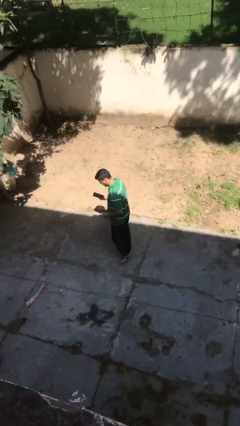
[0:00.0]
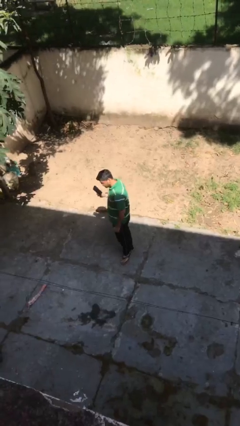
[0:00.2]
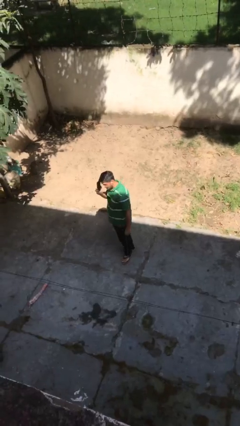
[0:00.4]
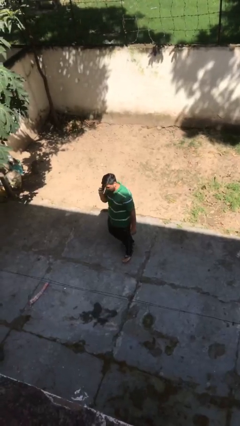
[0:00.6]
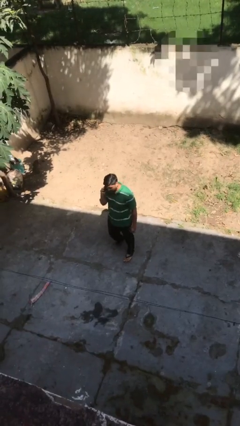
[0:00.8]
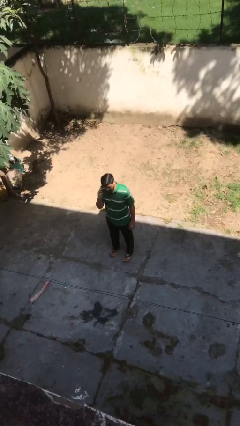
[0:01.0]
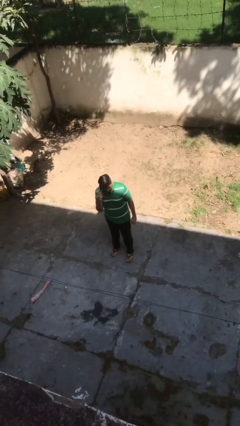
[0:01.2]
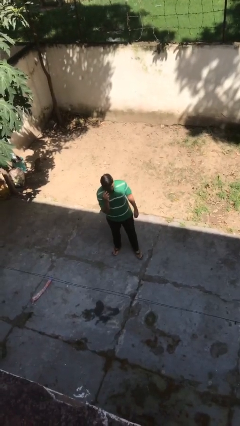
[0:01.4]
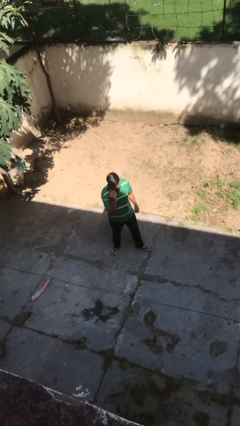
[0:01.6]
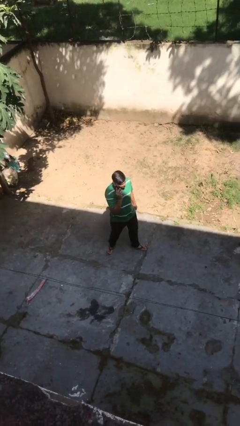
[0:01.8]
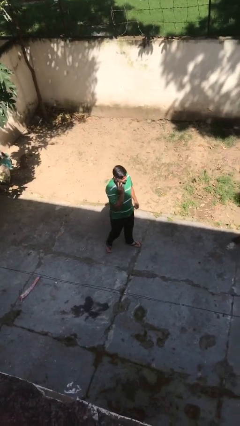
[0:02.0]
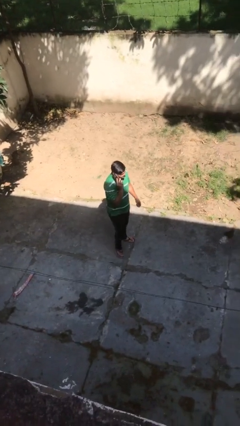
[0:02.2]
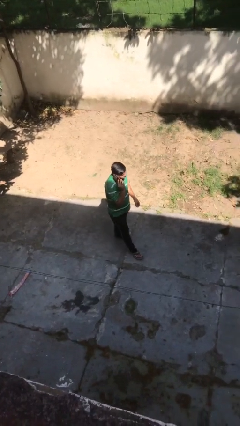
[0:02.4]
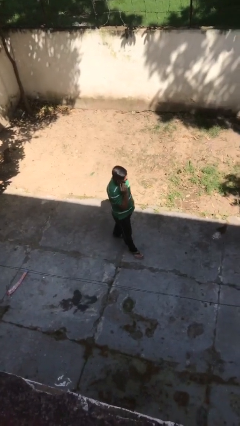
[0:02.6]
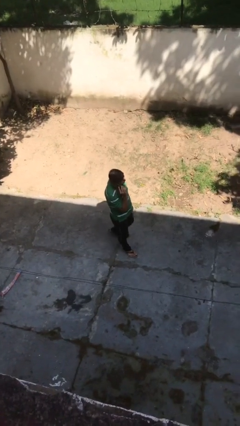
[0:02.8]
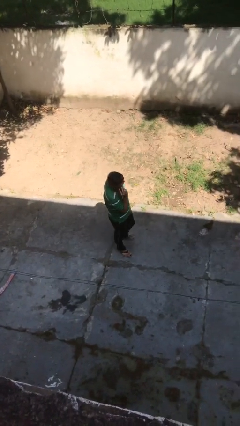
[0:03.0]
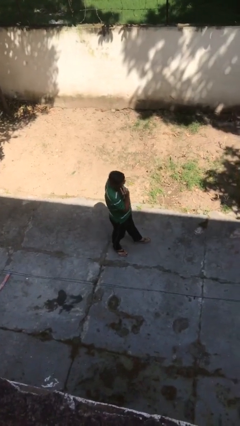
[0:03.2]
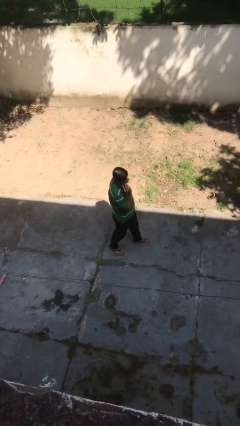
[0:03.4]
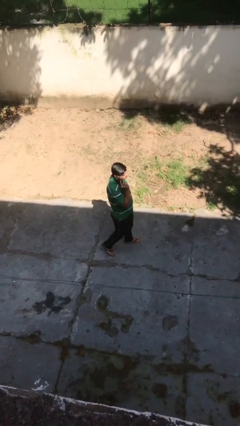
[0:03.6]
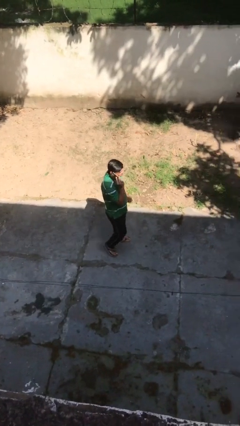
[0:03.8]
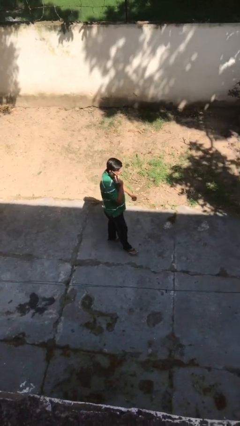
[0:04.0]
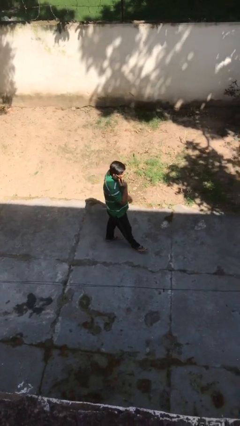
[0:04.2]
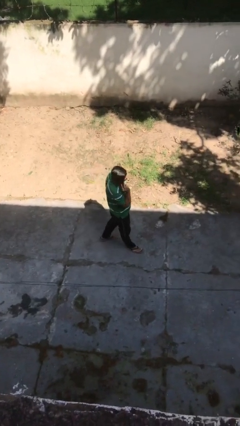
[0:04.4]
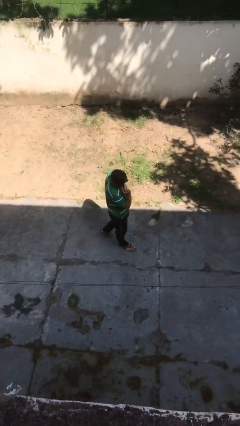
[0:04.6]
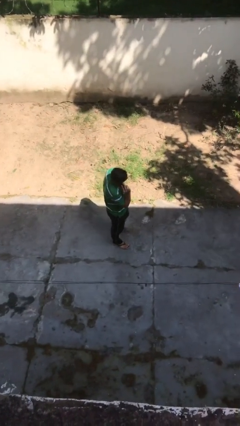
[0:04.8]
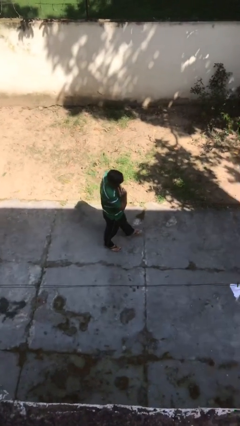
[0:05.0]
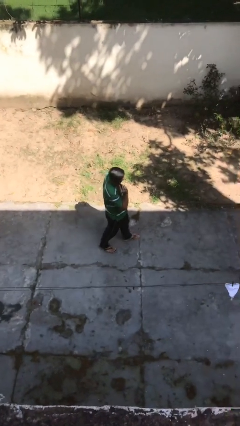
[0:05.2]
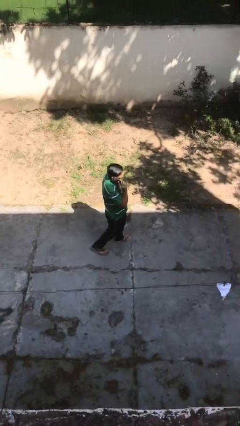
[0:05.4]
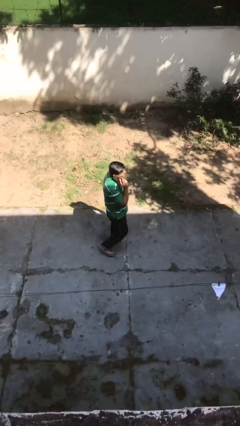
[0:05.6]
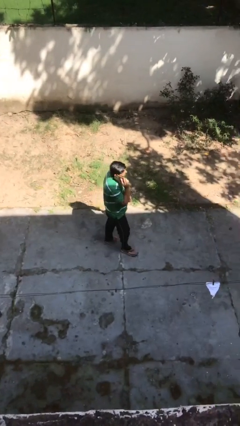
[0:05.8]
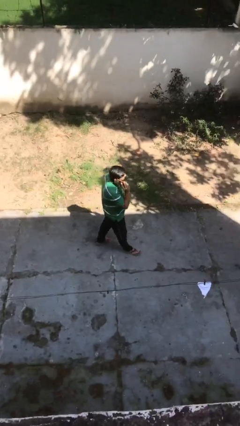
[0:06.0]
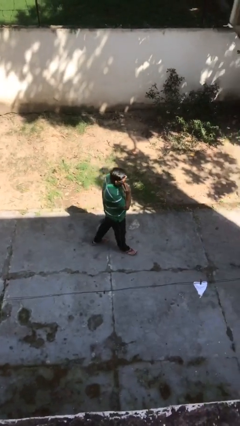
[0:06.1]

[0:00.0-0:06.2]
person talks on phone

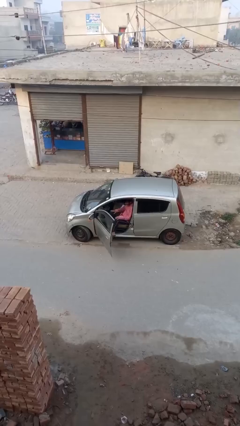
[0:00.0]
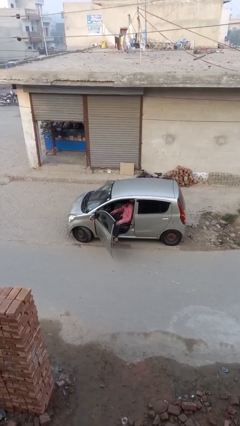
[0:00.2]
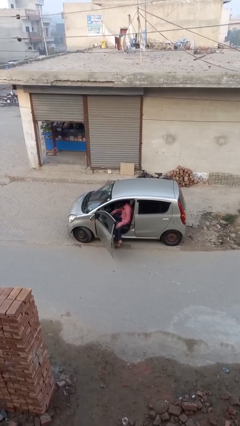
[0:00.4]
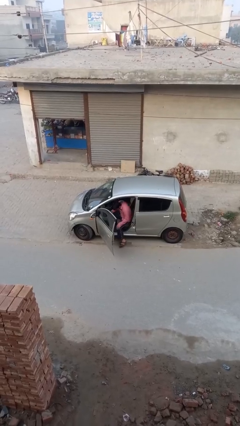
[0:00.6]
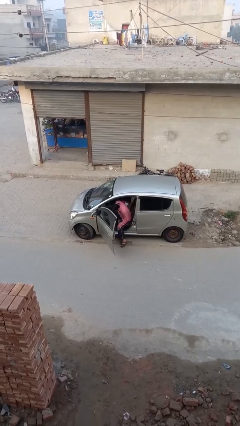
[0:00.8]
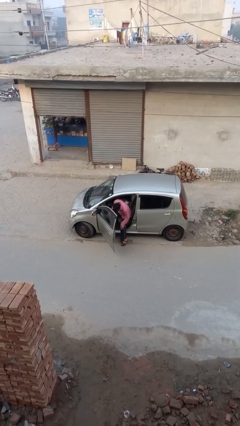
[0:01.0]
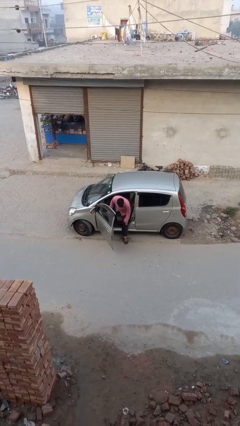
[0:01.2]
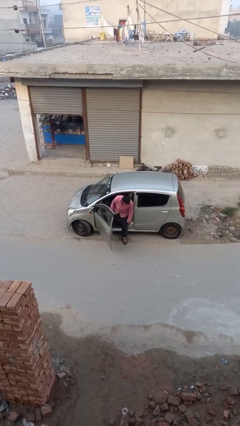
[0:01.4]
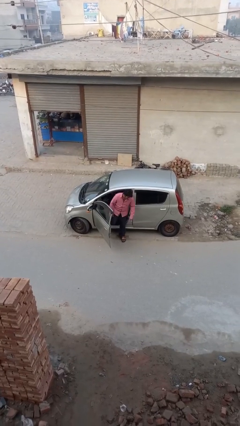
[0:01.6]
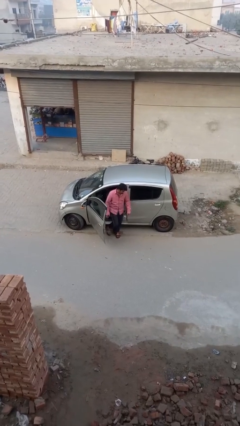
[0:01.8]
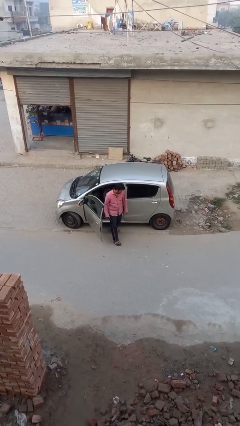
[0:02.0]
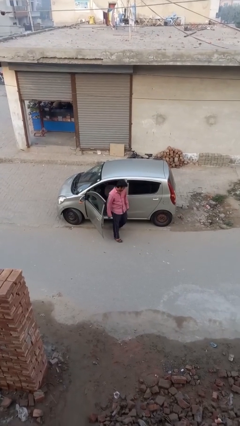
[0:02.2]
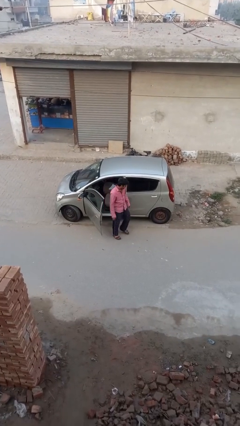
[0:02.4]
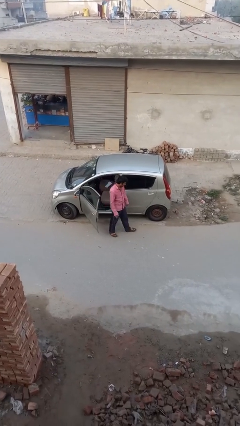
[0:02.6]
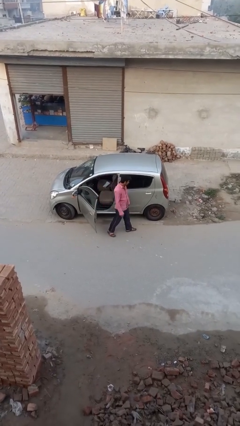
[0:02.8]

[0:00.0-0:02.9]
person exits car

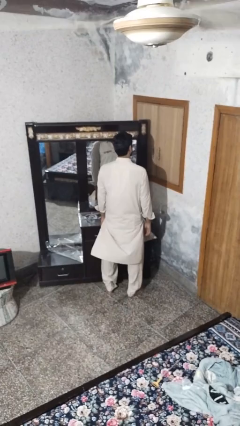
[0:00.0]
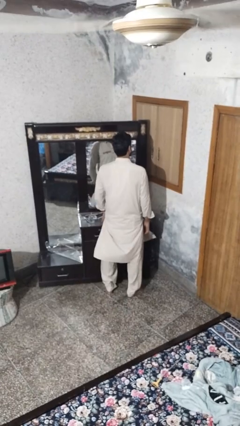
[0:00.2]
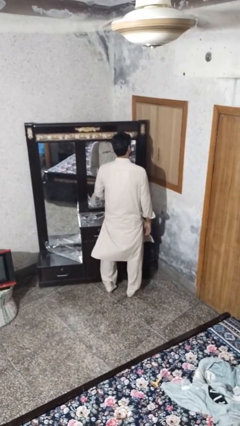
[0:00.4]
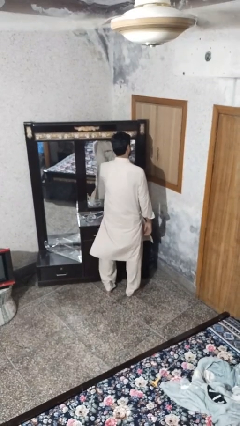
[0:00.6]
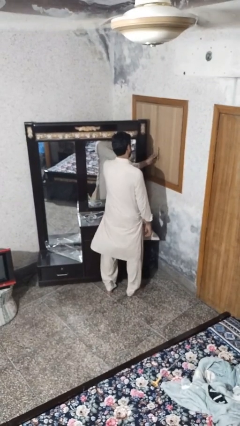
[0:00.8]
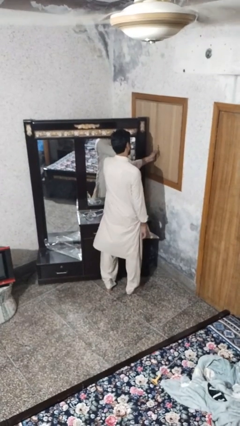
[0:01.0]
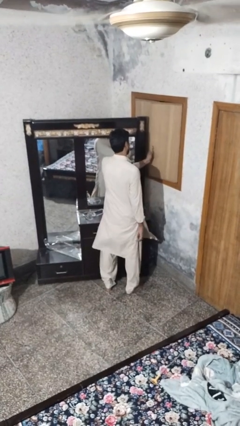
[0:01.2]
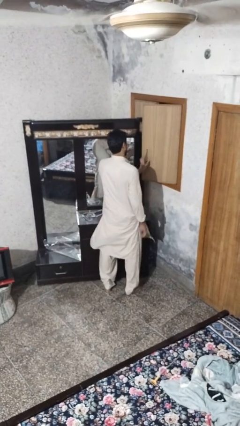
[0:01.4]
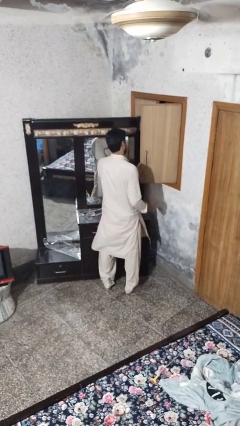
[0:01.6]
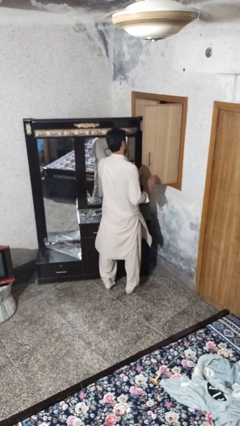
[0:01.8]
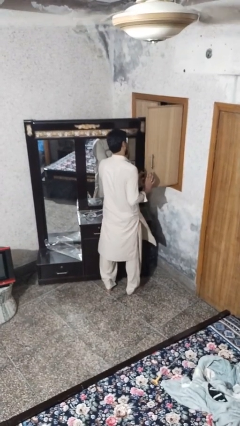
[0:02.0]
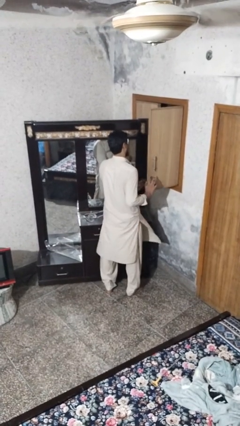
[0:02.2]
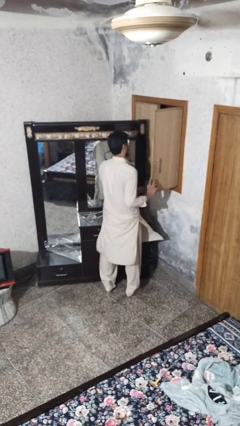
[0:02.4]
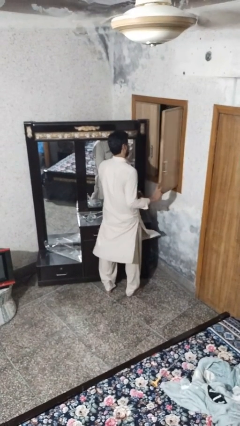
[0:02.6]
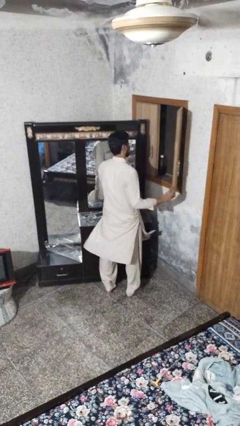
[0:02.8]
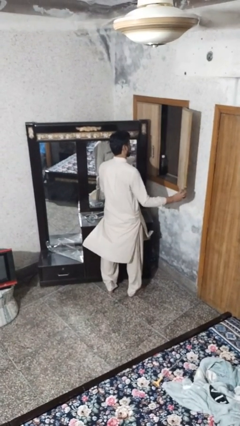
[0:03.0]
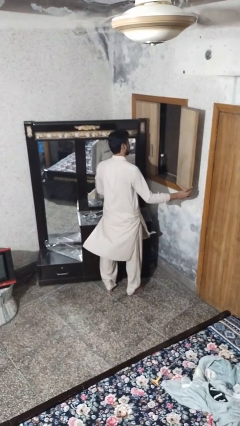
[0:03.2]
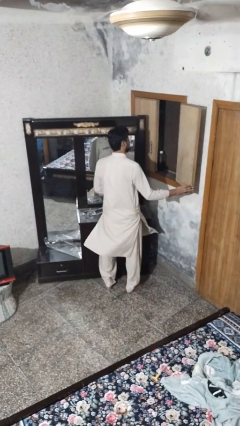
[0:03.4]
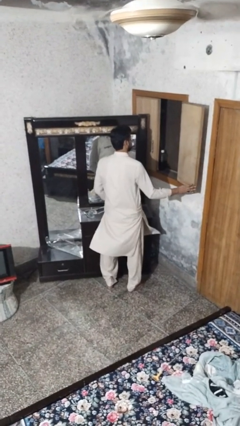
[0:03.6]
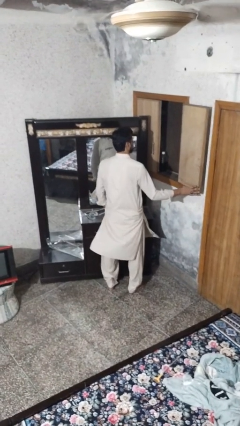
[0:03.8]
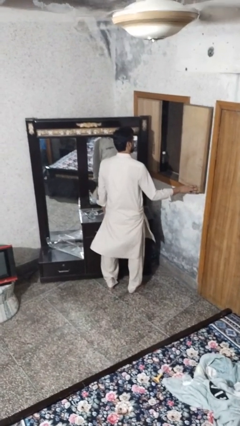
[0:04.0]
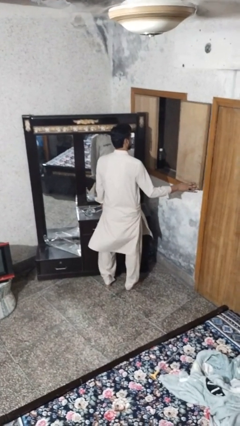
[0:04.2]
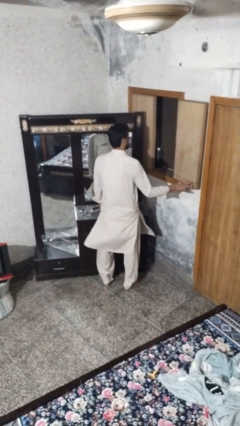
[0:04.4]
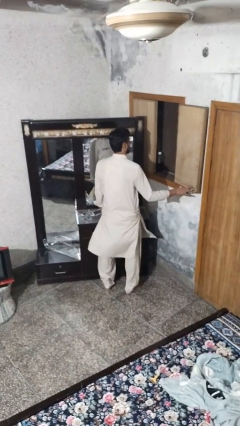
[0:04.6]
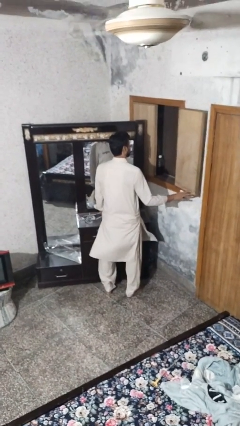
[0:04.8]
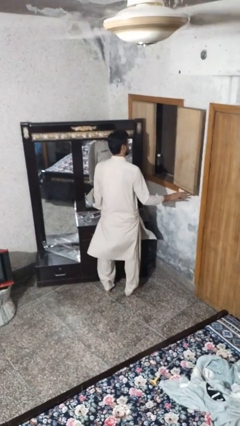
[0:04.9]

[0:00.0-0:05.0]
person opens home window

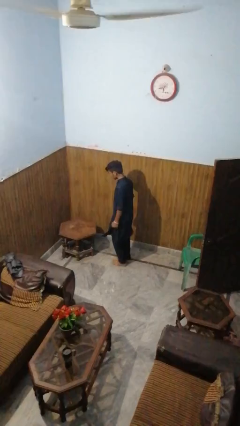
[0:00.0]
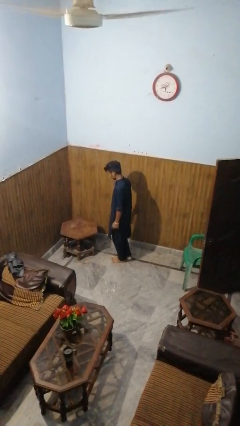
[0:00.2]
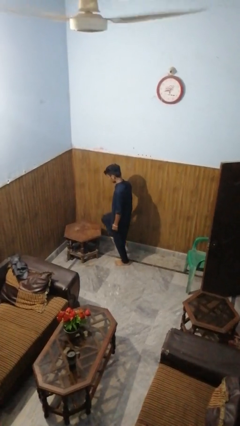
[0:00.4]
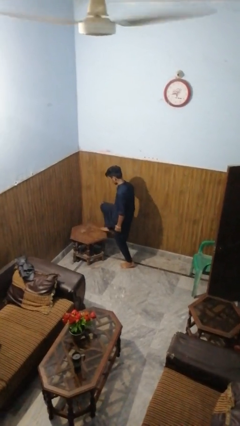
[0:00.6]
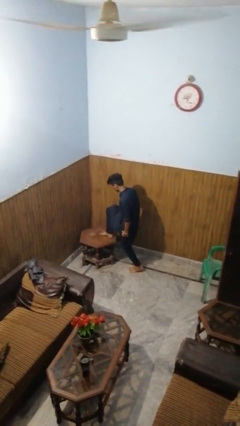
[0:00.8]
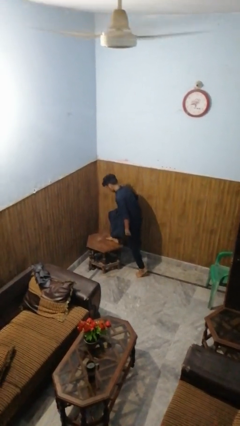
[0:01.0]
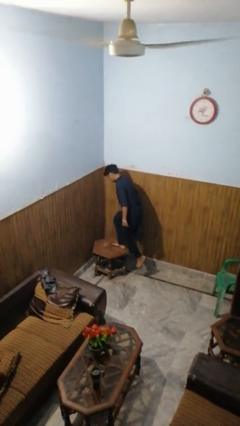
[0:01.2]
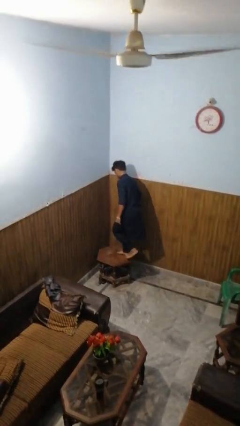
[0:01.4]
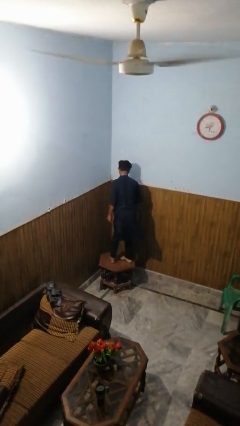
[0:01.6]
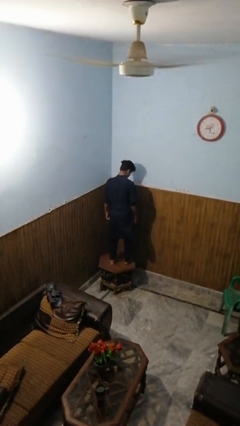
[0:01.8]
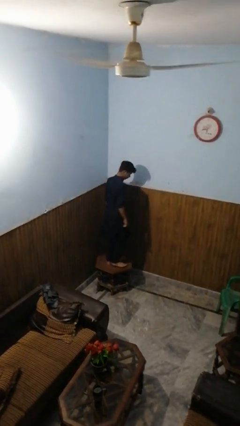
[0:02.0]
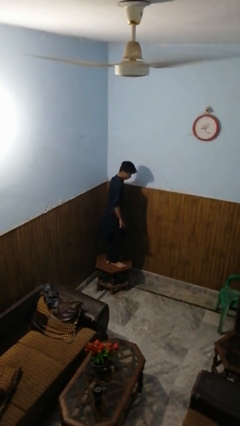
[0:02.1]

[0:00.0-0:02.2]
person climbs on table

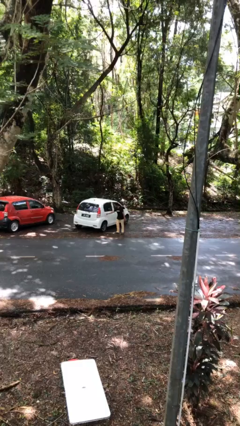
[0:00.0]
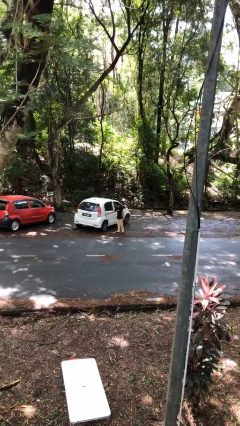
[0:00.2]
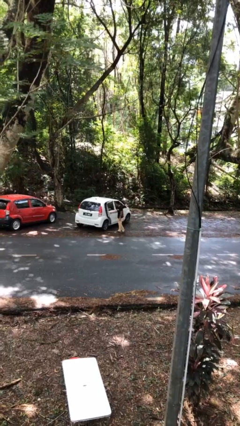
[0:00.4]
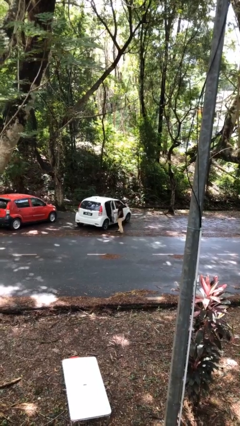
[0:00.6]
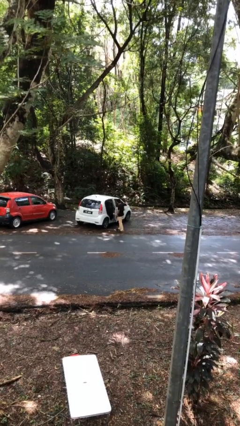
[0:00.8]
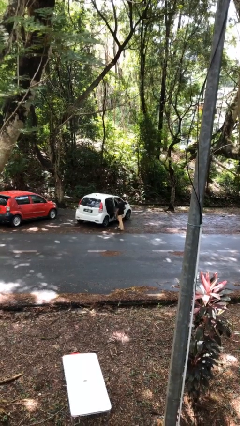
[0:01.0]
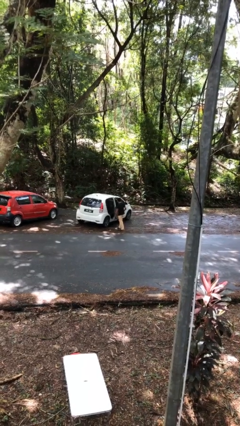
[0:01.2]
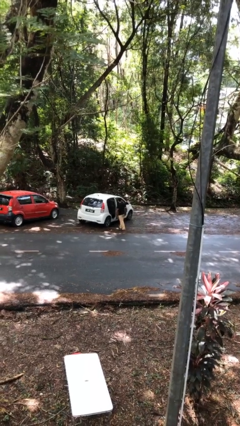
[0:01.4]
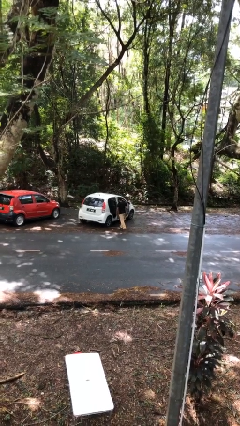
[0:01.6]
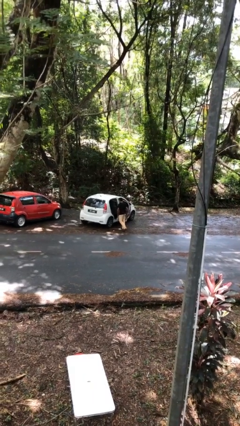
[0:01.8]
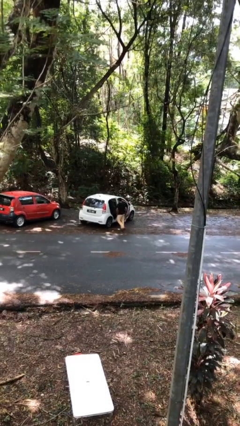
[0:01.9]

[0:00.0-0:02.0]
person opens car door
